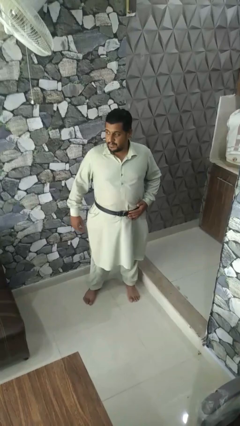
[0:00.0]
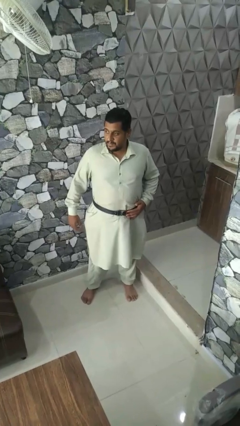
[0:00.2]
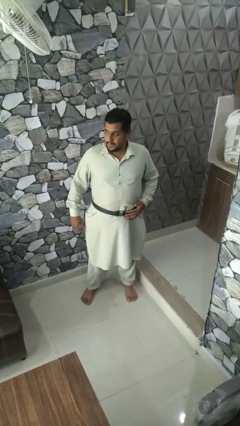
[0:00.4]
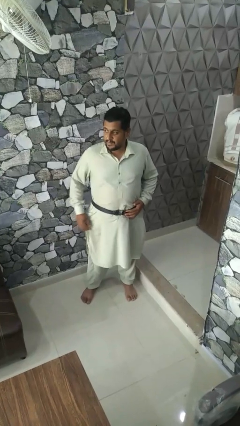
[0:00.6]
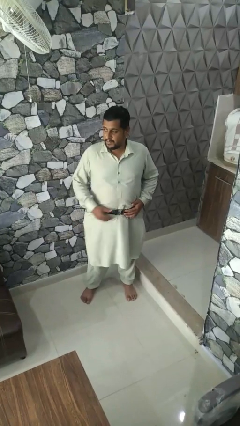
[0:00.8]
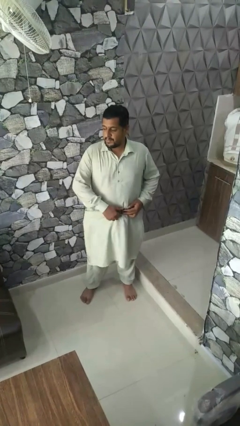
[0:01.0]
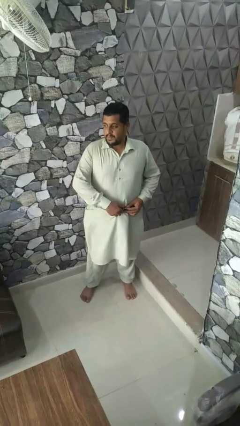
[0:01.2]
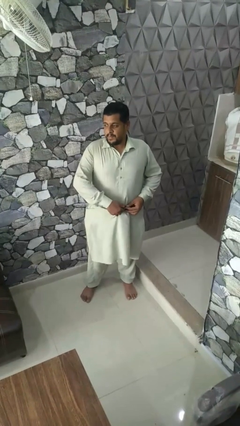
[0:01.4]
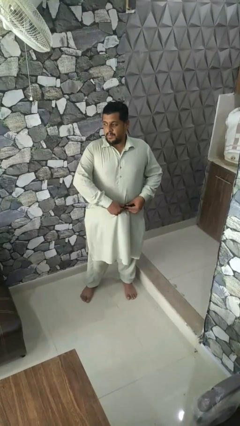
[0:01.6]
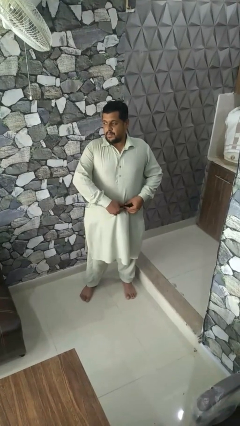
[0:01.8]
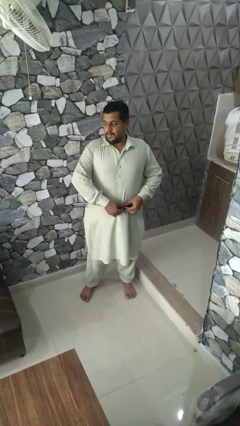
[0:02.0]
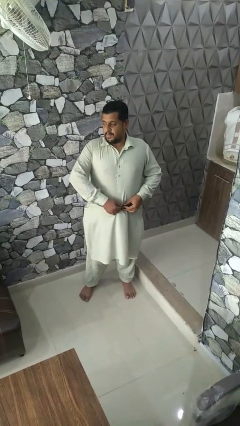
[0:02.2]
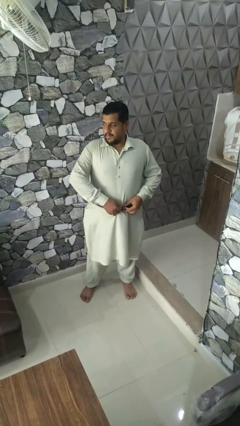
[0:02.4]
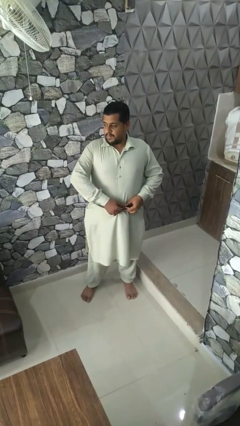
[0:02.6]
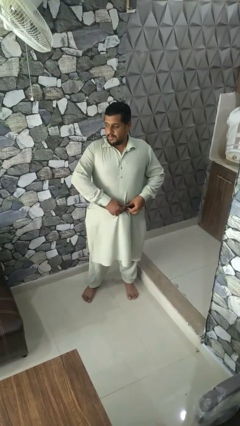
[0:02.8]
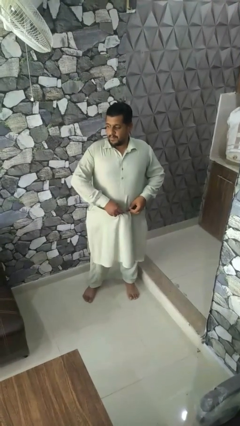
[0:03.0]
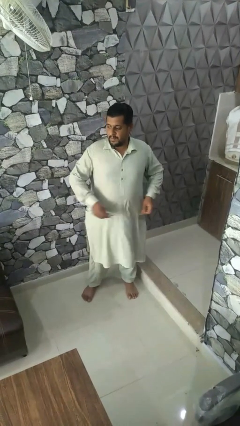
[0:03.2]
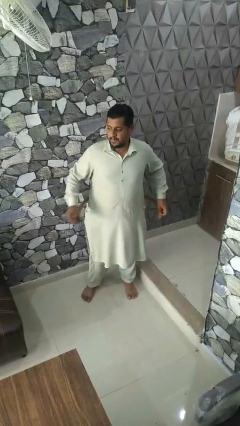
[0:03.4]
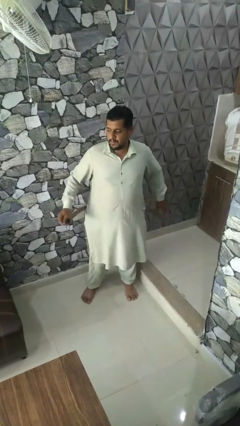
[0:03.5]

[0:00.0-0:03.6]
person takes off belt

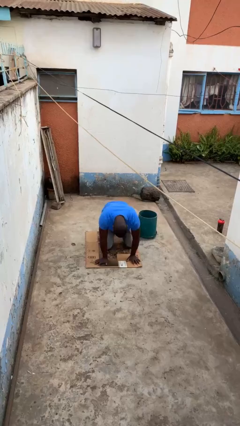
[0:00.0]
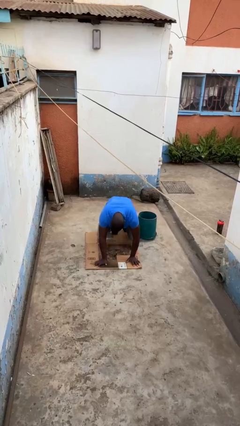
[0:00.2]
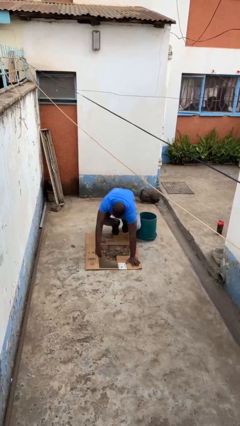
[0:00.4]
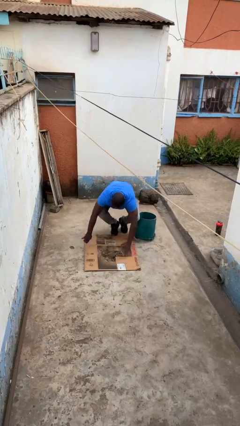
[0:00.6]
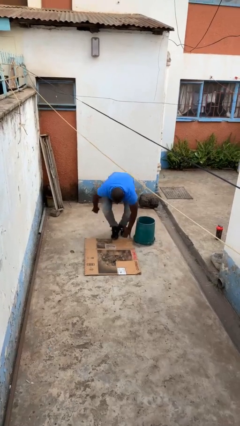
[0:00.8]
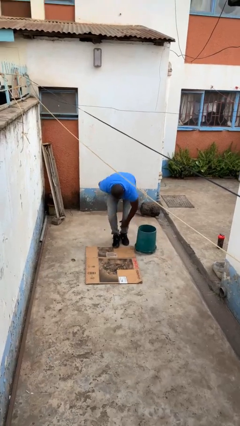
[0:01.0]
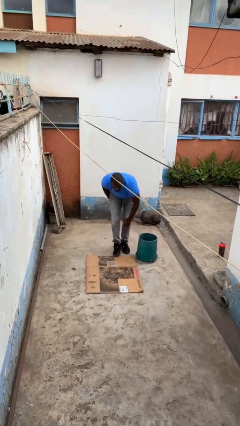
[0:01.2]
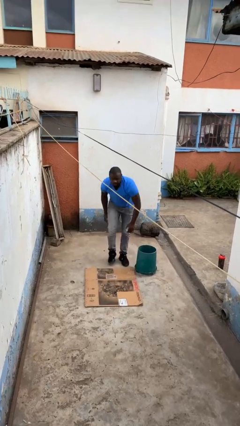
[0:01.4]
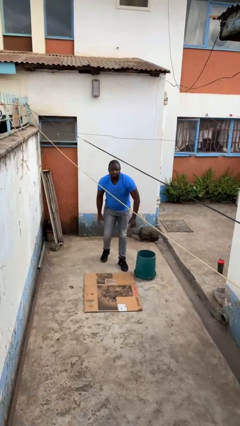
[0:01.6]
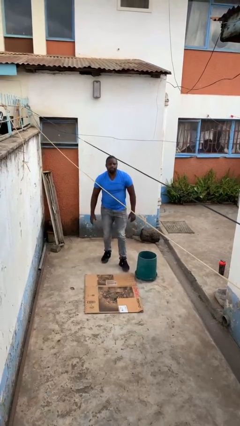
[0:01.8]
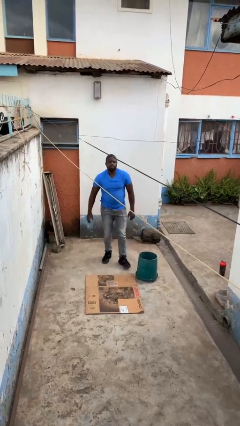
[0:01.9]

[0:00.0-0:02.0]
person stands up from floor

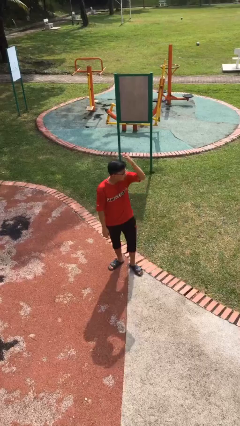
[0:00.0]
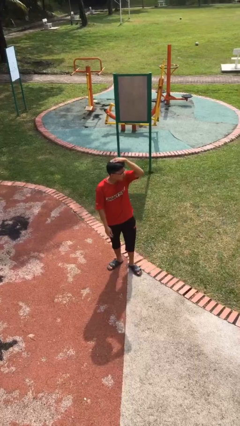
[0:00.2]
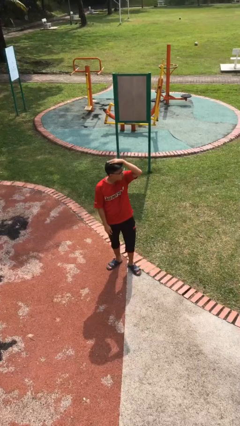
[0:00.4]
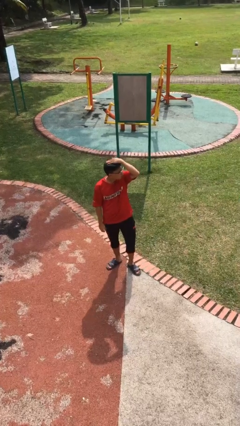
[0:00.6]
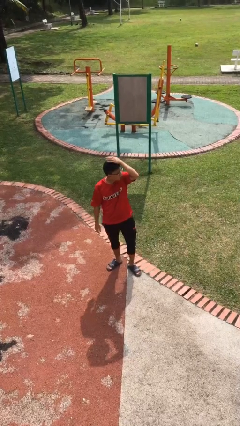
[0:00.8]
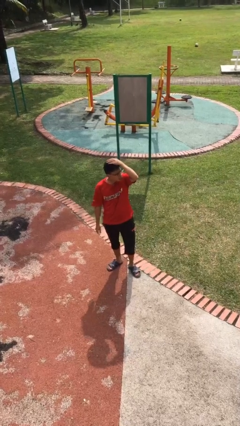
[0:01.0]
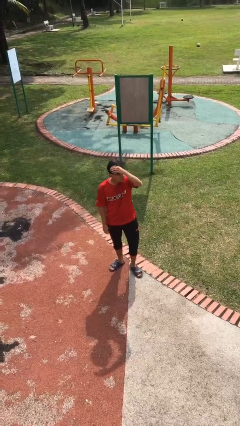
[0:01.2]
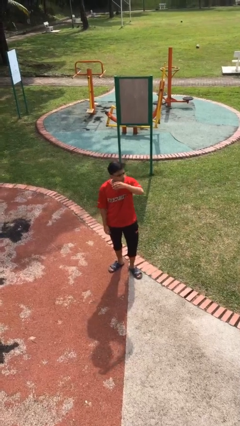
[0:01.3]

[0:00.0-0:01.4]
person pats head

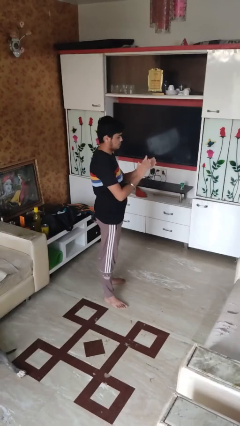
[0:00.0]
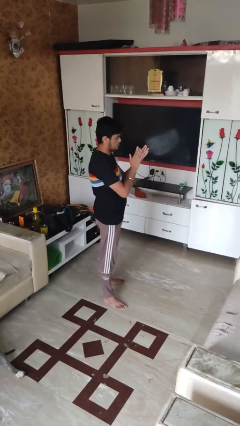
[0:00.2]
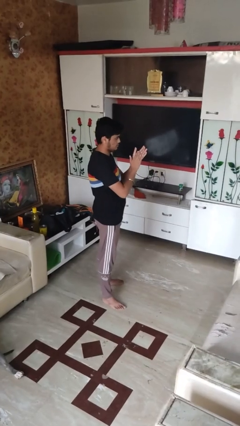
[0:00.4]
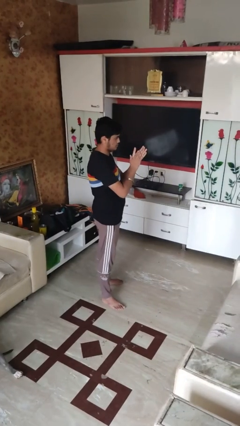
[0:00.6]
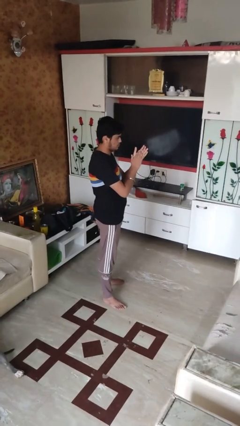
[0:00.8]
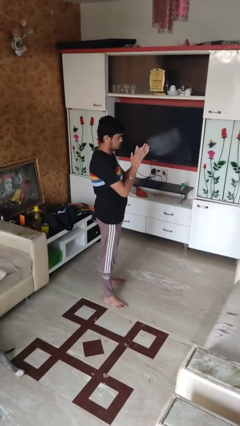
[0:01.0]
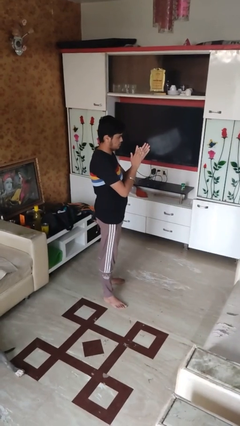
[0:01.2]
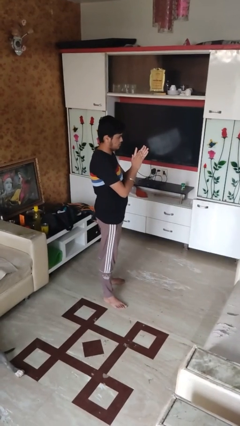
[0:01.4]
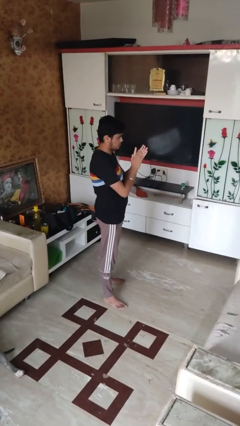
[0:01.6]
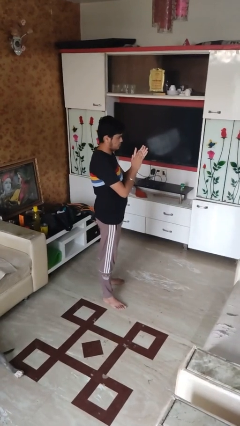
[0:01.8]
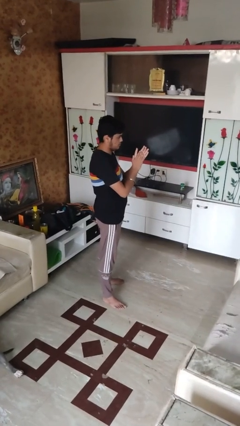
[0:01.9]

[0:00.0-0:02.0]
person claps hands

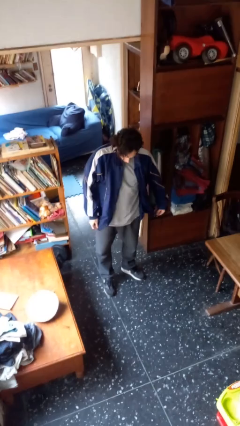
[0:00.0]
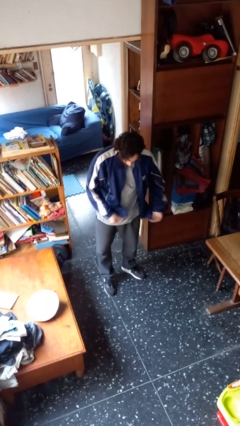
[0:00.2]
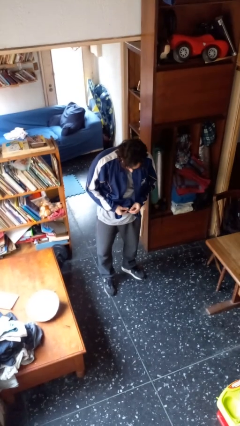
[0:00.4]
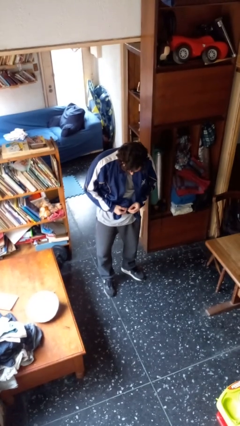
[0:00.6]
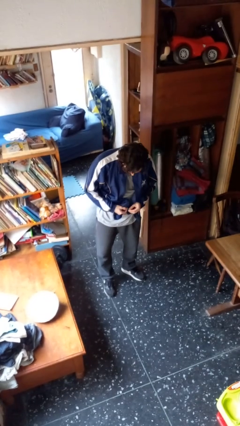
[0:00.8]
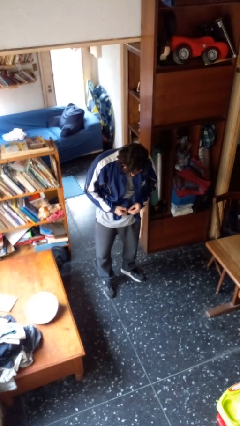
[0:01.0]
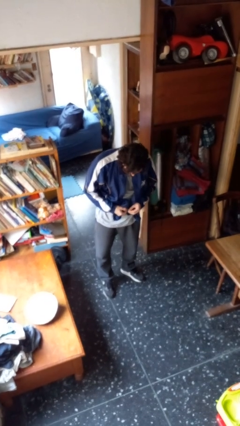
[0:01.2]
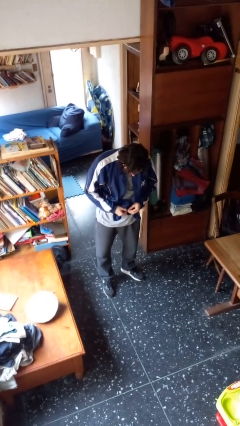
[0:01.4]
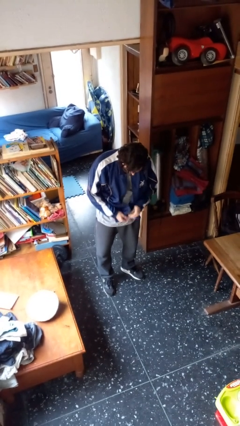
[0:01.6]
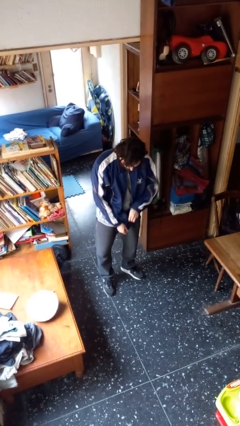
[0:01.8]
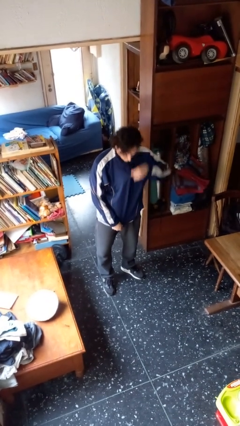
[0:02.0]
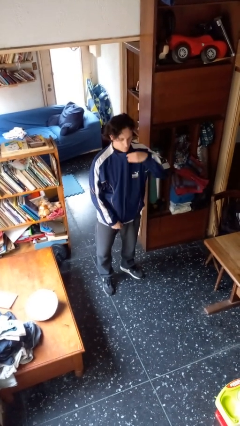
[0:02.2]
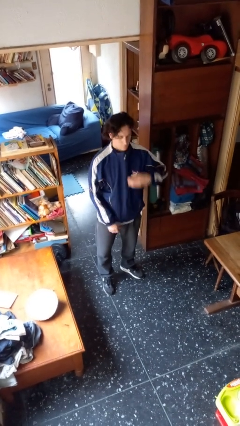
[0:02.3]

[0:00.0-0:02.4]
person zips up jacket

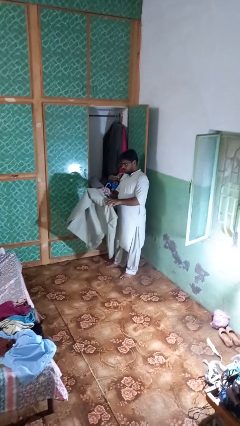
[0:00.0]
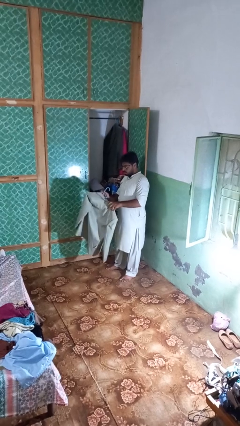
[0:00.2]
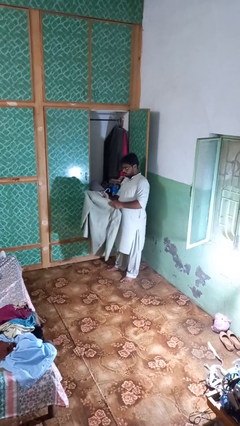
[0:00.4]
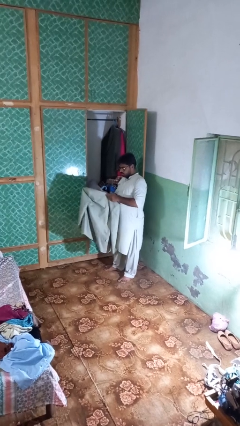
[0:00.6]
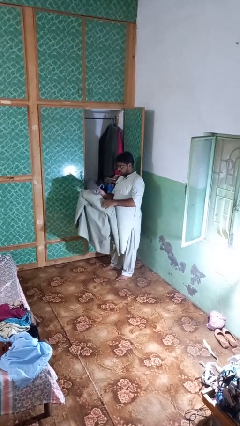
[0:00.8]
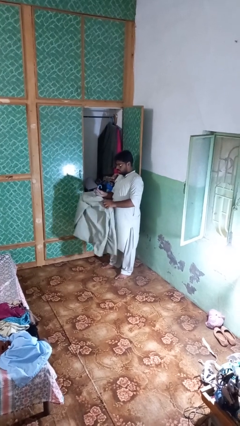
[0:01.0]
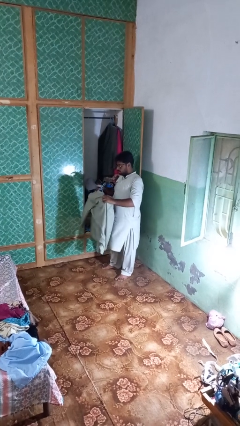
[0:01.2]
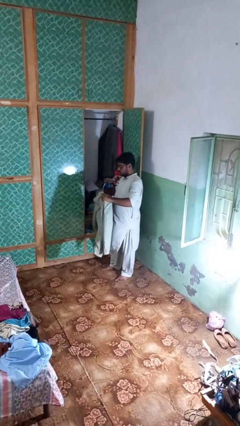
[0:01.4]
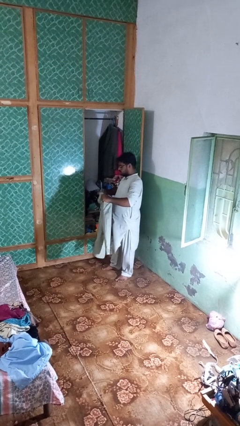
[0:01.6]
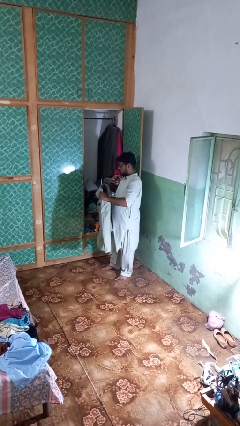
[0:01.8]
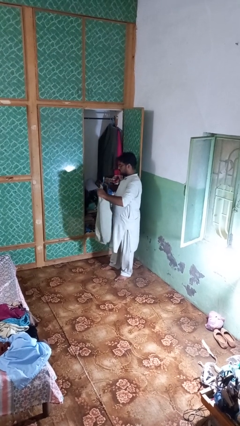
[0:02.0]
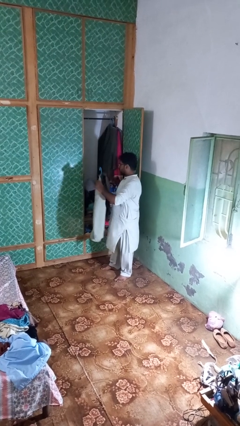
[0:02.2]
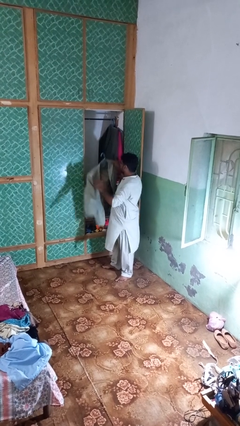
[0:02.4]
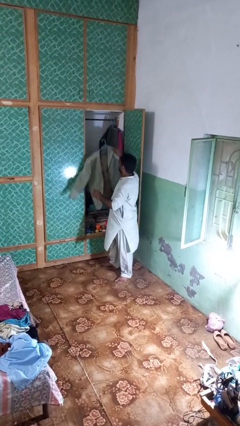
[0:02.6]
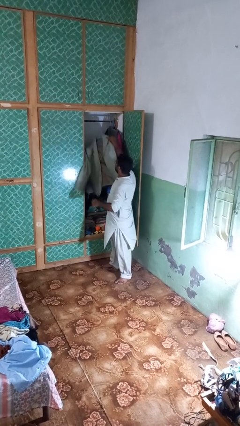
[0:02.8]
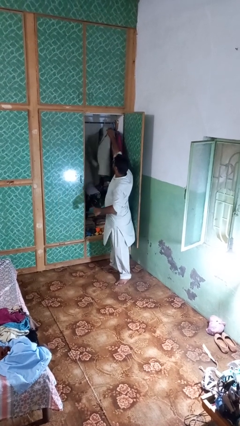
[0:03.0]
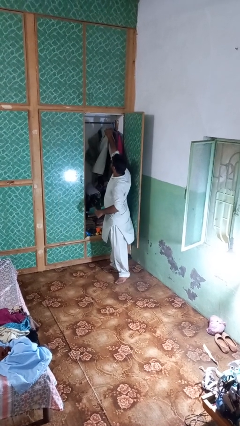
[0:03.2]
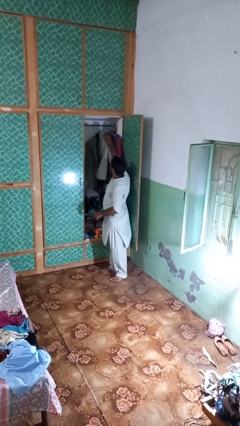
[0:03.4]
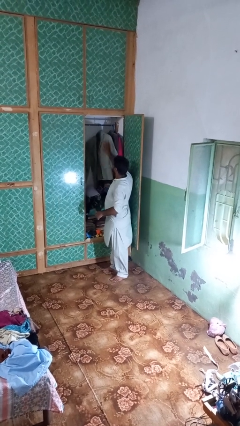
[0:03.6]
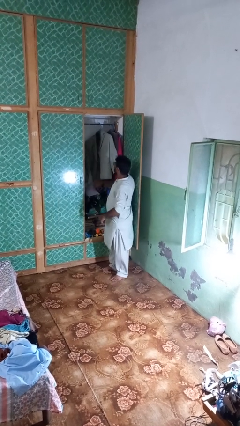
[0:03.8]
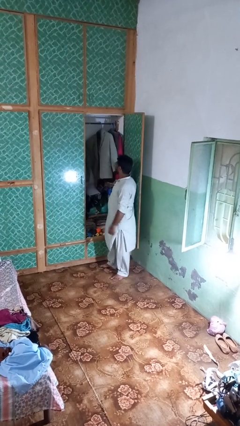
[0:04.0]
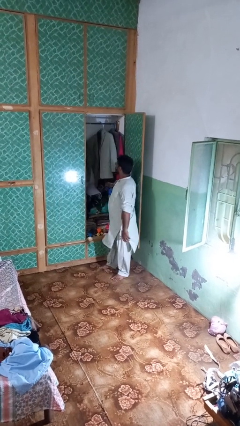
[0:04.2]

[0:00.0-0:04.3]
person puts clothes into closet

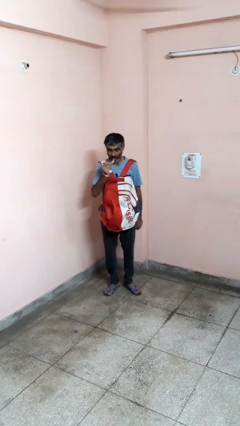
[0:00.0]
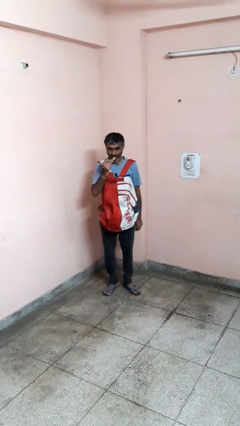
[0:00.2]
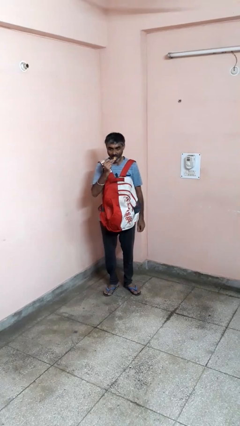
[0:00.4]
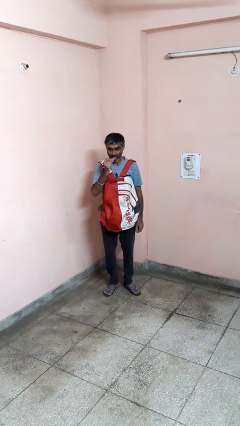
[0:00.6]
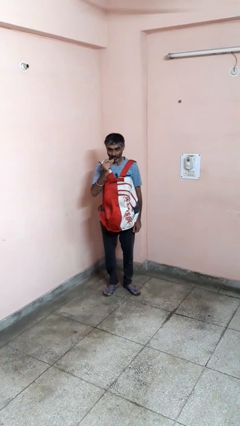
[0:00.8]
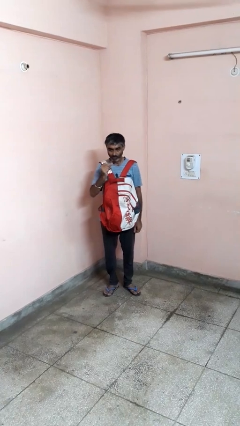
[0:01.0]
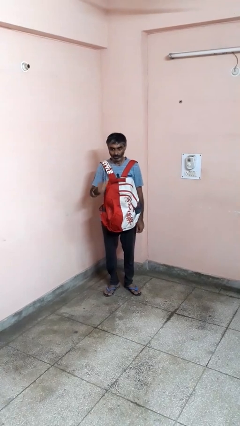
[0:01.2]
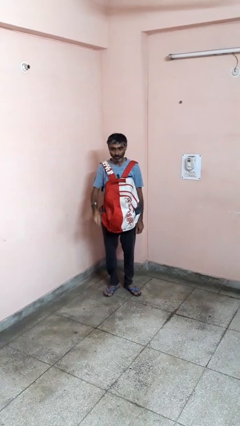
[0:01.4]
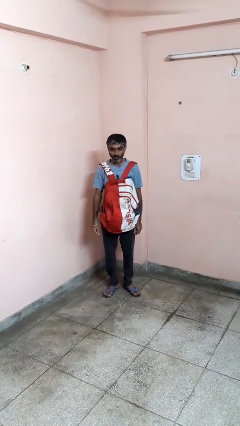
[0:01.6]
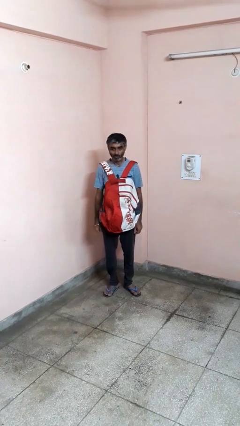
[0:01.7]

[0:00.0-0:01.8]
person eats snack from bag
